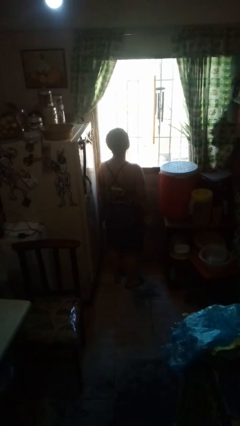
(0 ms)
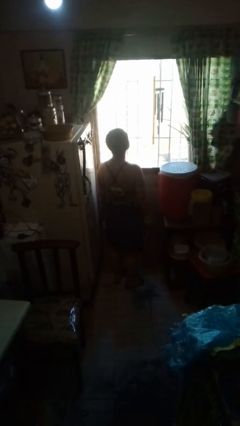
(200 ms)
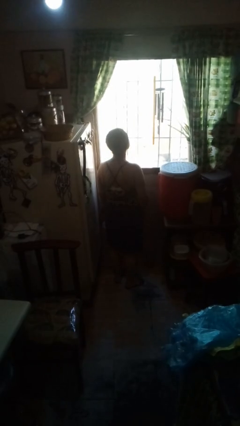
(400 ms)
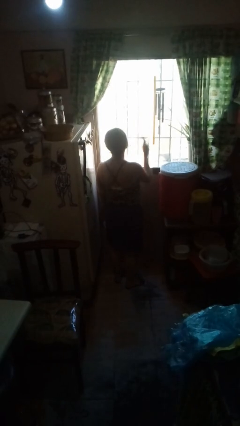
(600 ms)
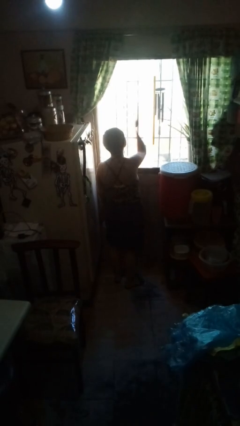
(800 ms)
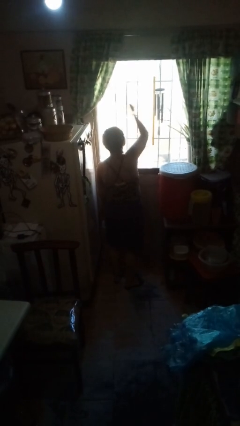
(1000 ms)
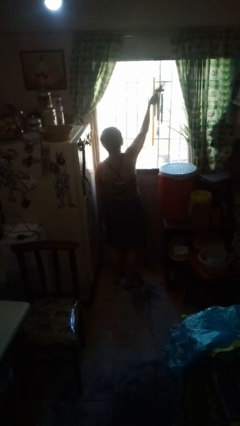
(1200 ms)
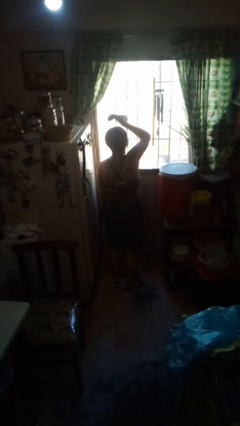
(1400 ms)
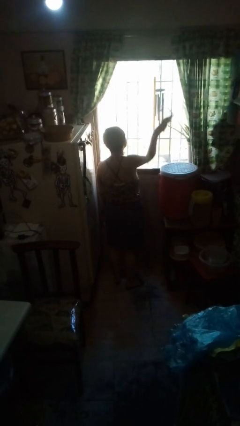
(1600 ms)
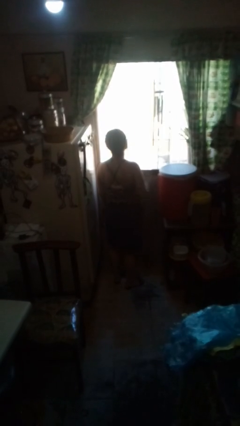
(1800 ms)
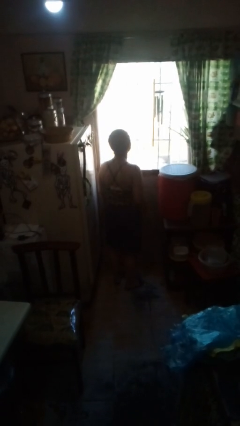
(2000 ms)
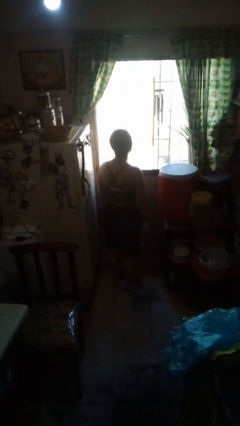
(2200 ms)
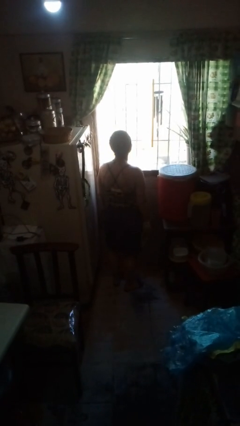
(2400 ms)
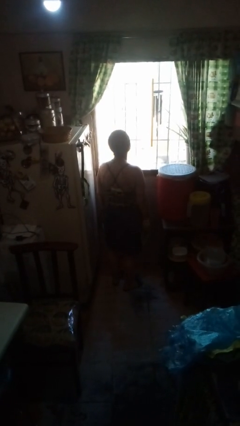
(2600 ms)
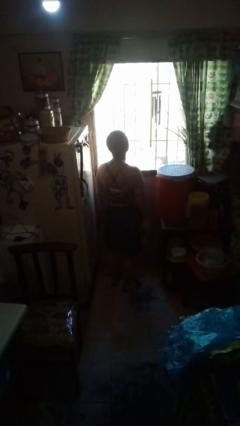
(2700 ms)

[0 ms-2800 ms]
person washes window

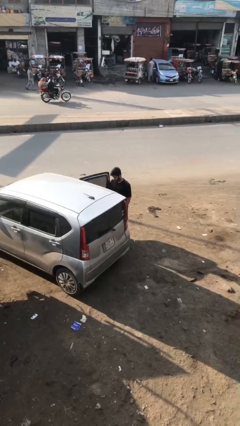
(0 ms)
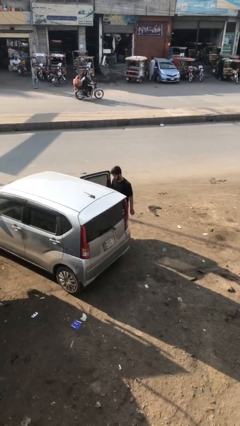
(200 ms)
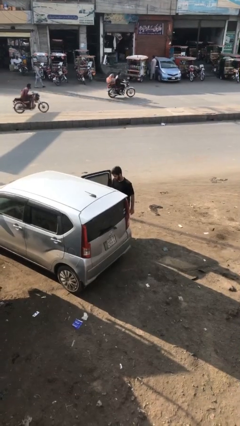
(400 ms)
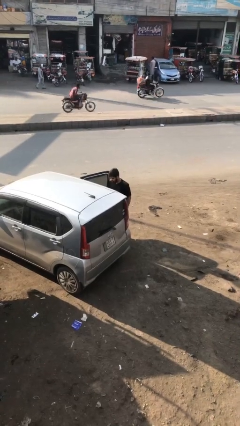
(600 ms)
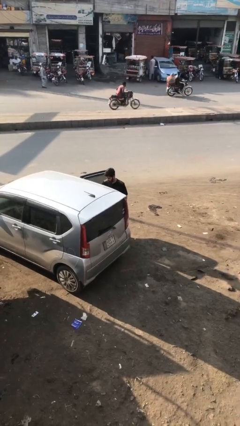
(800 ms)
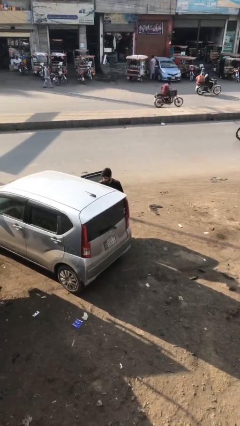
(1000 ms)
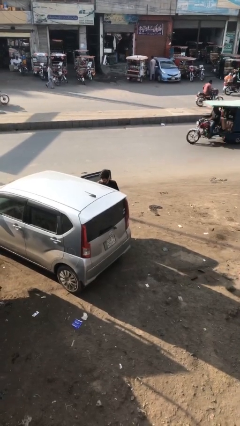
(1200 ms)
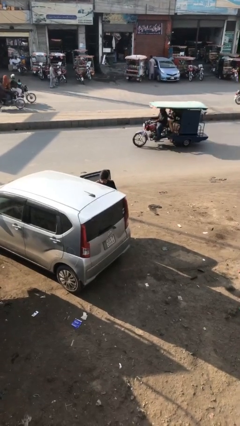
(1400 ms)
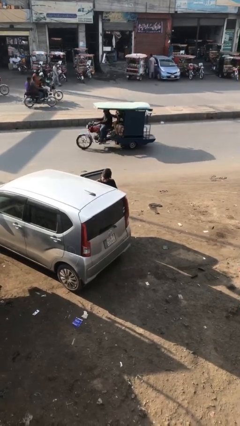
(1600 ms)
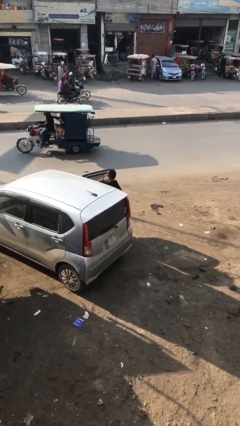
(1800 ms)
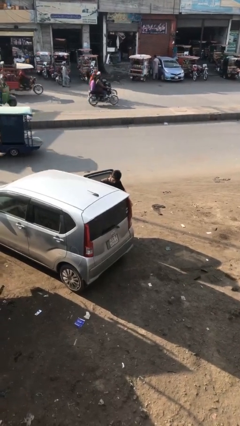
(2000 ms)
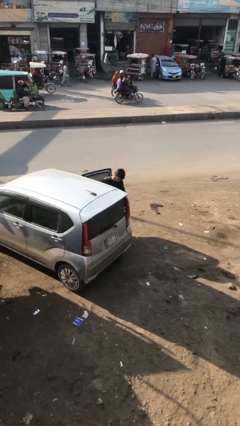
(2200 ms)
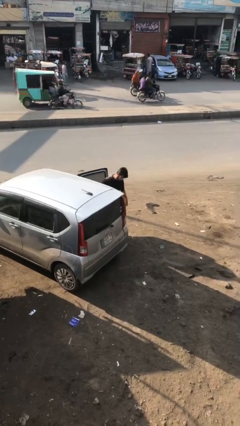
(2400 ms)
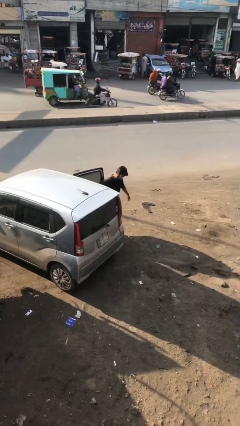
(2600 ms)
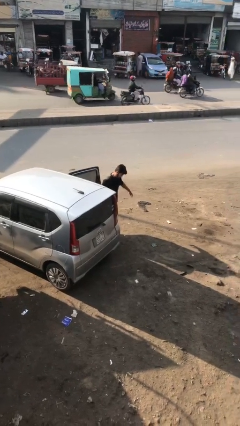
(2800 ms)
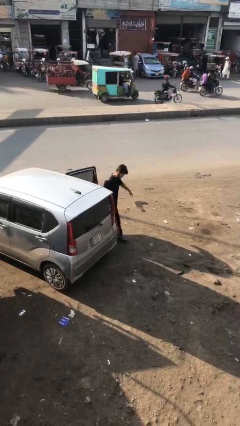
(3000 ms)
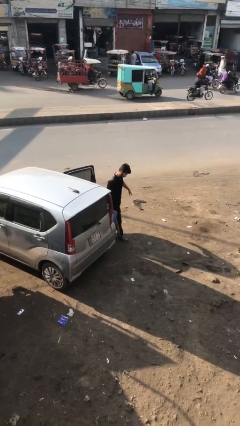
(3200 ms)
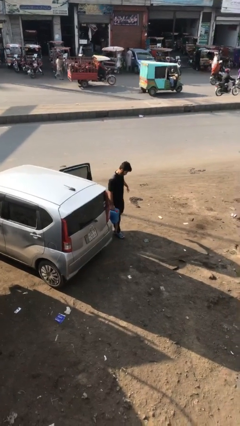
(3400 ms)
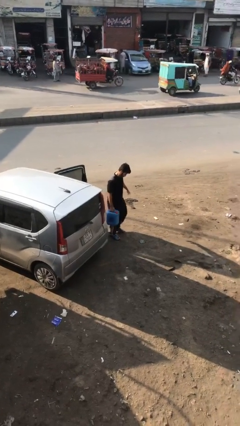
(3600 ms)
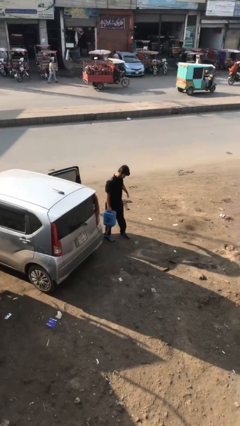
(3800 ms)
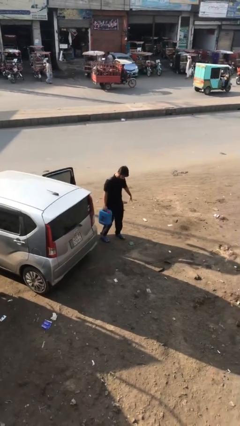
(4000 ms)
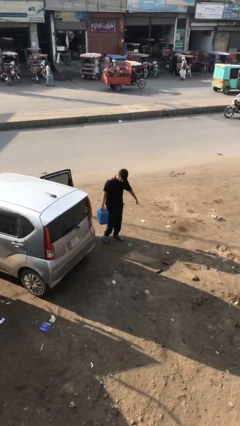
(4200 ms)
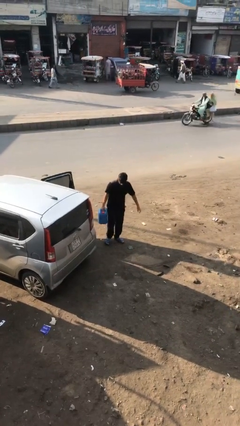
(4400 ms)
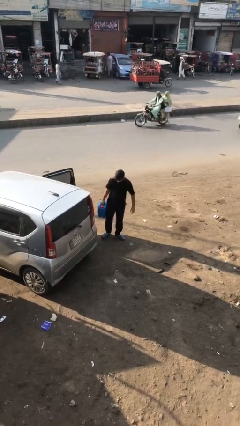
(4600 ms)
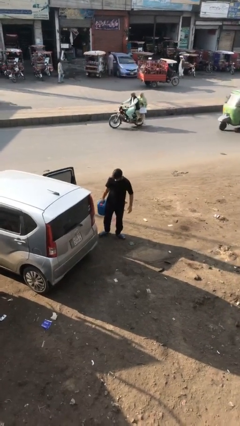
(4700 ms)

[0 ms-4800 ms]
person unloads car

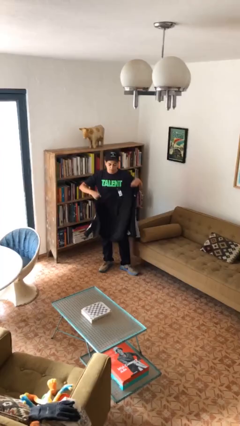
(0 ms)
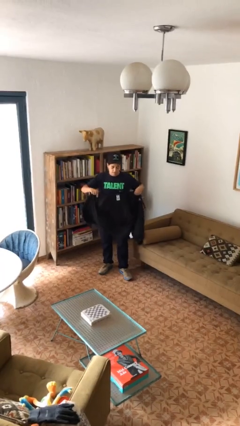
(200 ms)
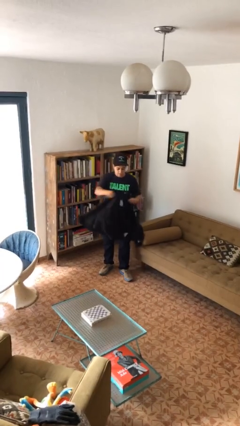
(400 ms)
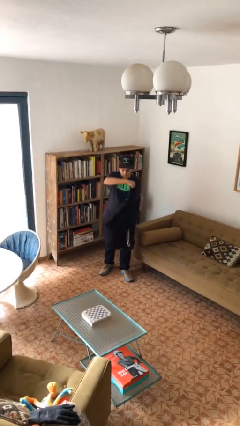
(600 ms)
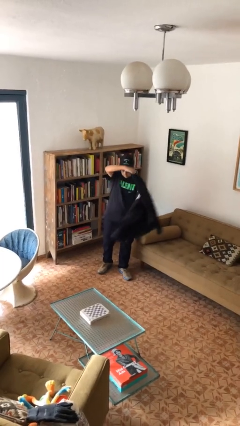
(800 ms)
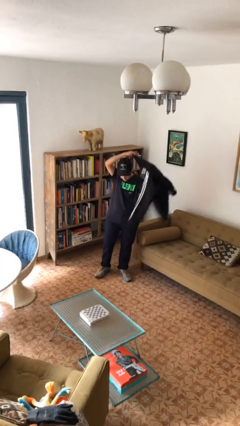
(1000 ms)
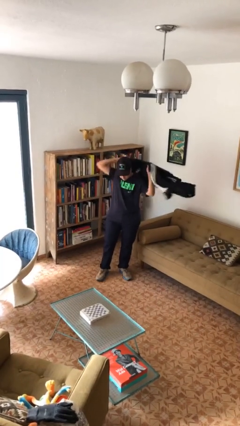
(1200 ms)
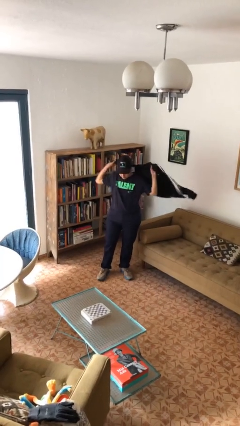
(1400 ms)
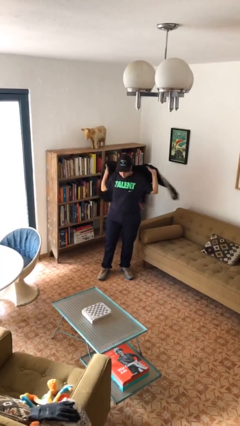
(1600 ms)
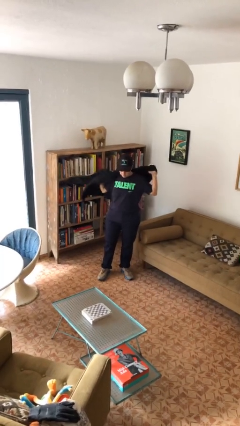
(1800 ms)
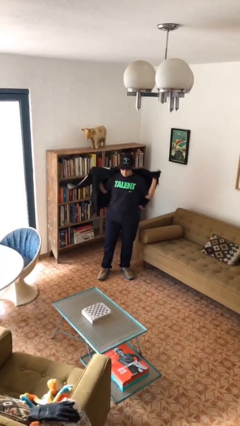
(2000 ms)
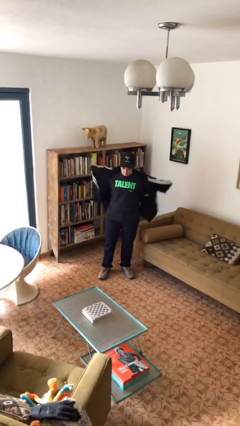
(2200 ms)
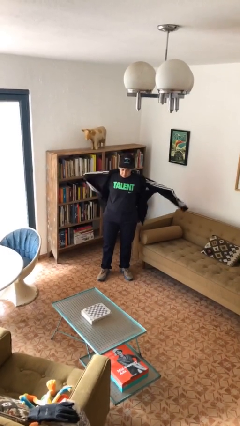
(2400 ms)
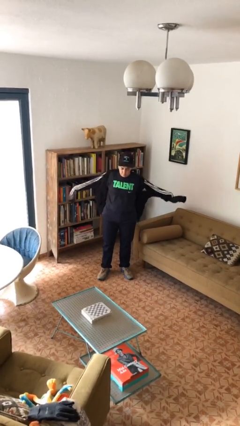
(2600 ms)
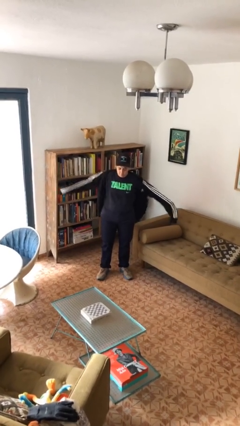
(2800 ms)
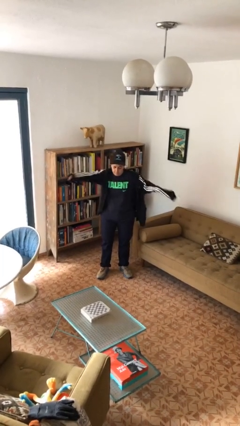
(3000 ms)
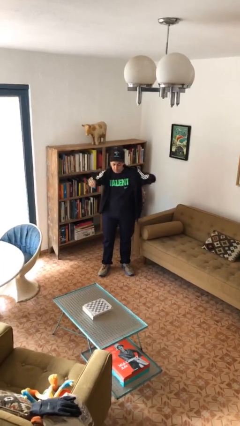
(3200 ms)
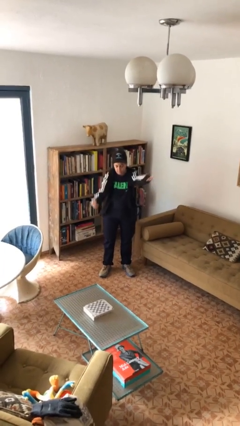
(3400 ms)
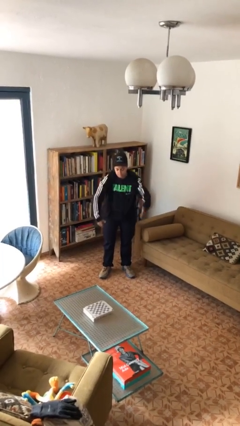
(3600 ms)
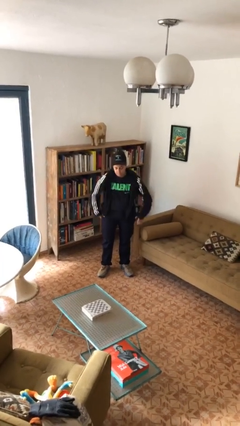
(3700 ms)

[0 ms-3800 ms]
person puts on jacket

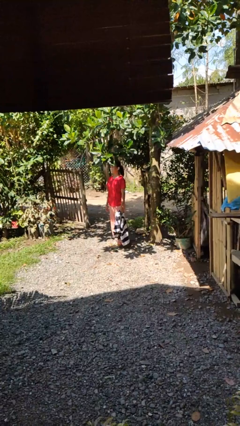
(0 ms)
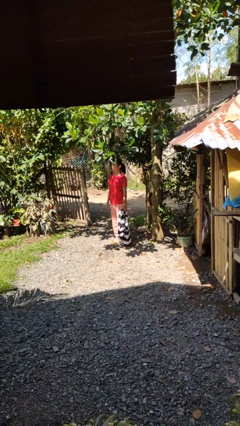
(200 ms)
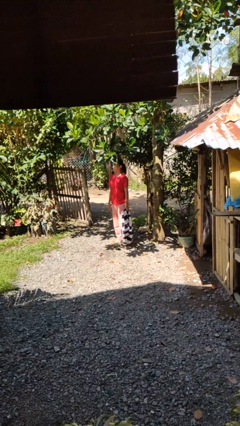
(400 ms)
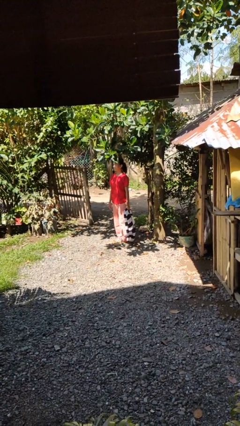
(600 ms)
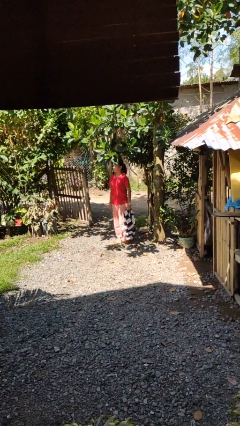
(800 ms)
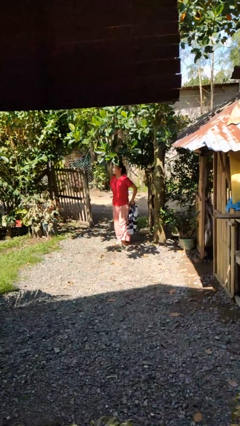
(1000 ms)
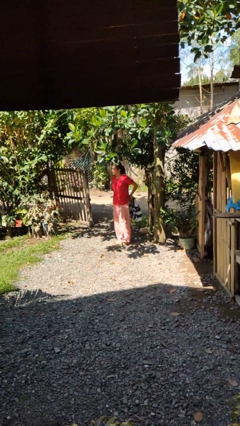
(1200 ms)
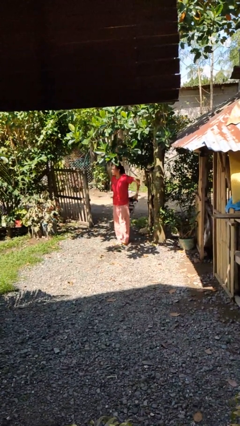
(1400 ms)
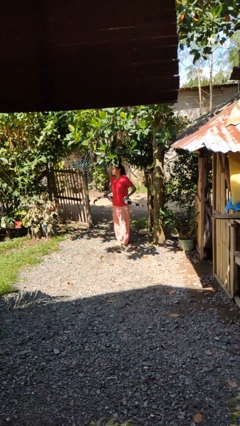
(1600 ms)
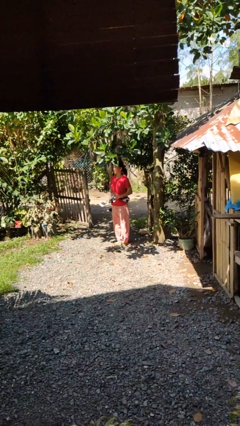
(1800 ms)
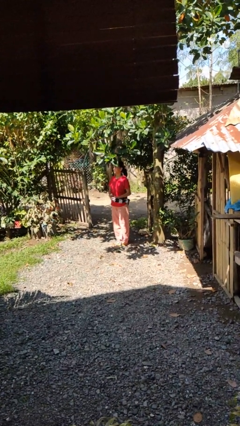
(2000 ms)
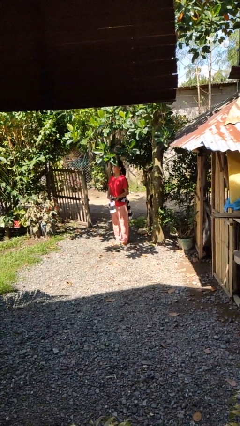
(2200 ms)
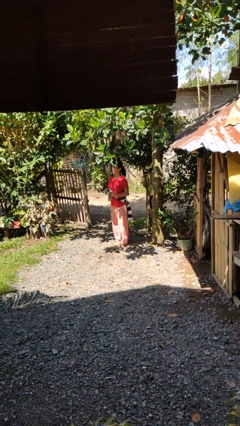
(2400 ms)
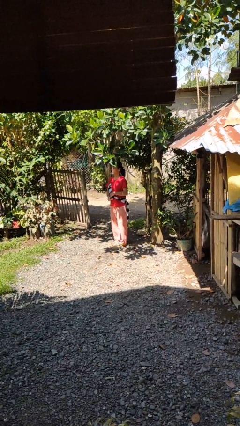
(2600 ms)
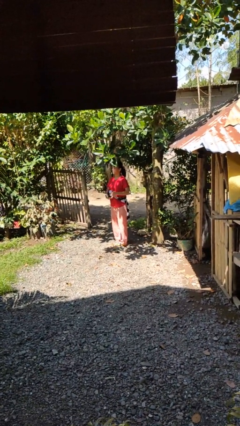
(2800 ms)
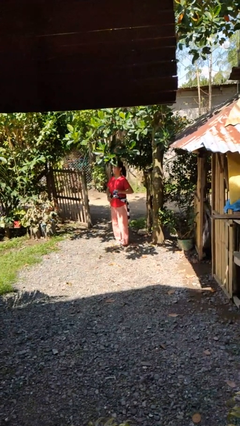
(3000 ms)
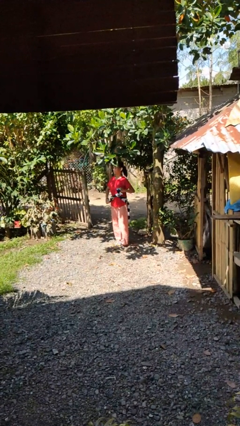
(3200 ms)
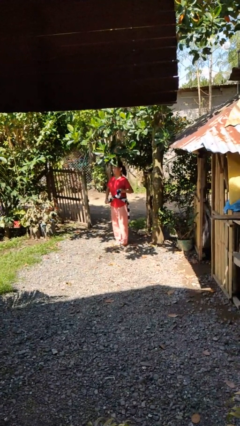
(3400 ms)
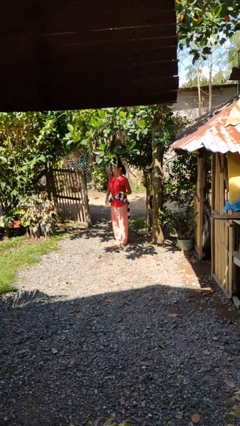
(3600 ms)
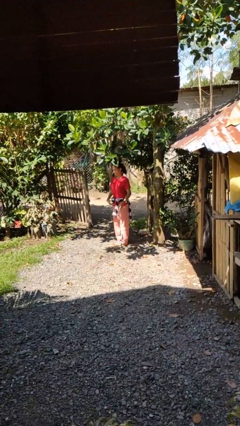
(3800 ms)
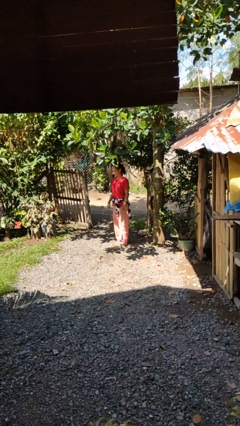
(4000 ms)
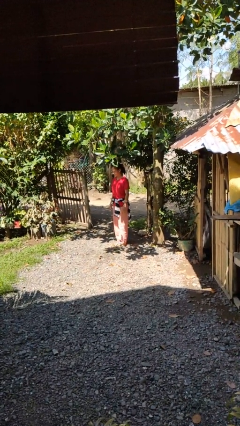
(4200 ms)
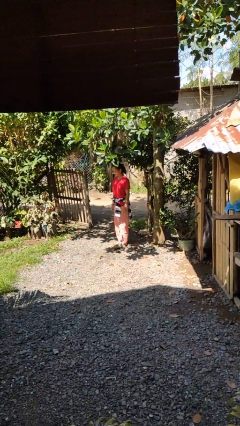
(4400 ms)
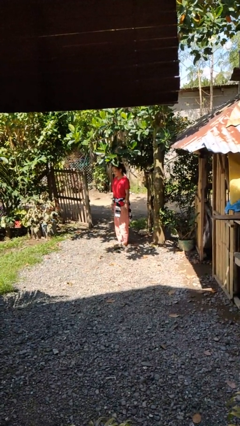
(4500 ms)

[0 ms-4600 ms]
person ties jacket around waist

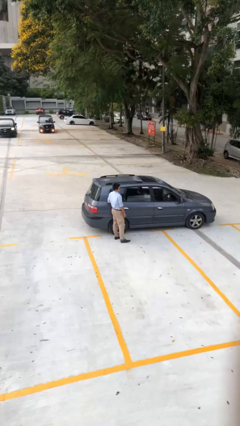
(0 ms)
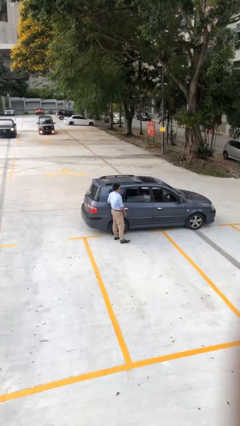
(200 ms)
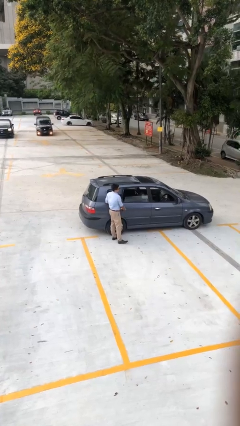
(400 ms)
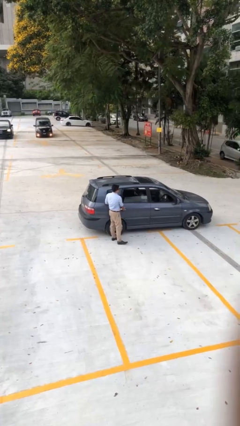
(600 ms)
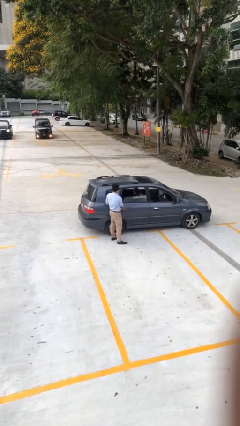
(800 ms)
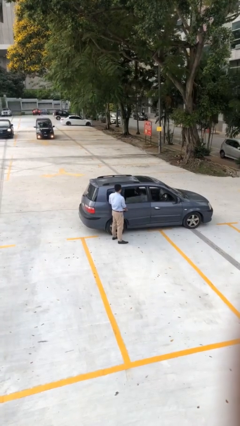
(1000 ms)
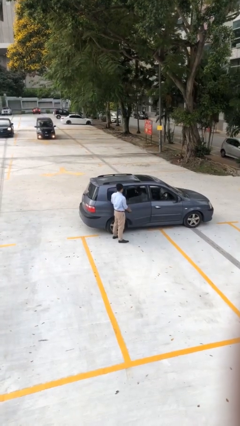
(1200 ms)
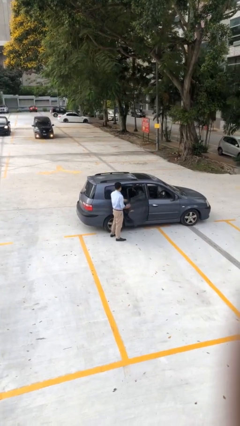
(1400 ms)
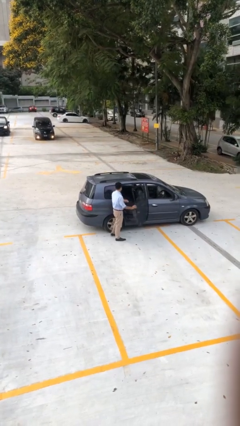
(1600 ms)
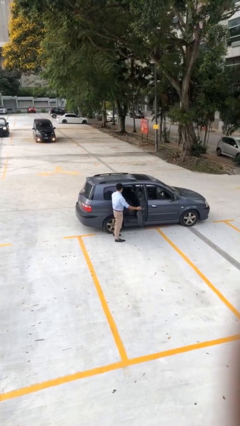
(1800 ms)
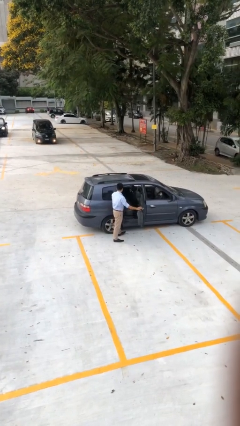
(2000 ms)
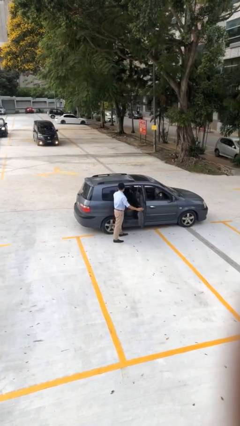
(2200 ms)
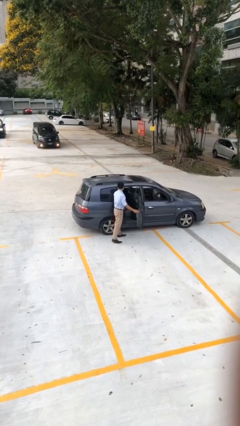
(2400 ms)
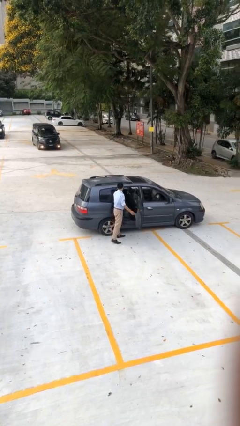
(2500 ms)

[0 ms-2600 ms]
person opens car door
